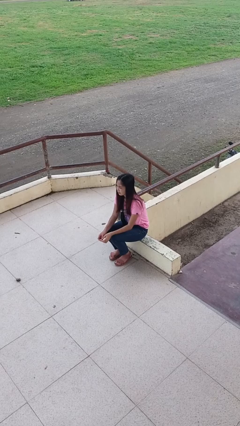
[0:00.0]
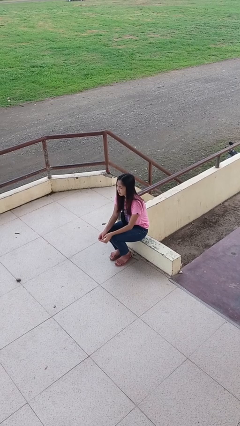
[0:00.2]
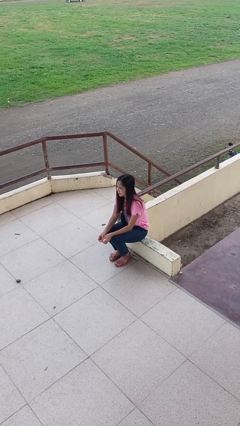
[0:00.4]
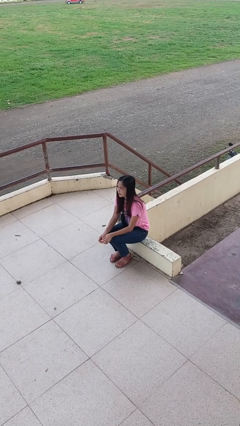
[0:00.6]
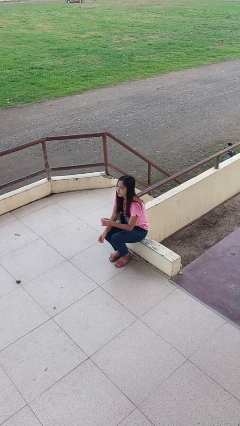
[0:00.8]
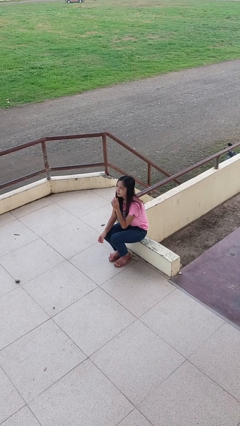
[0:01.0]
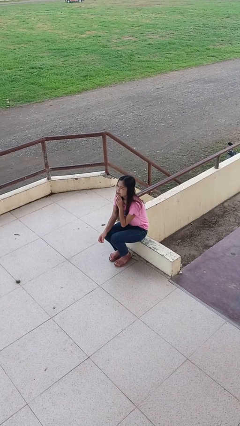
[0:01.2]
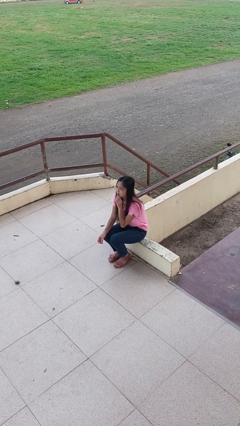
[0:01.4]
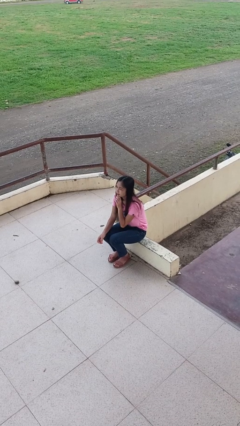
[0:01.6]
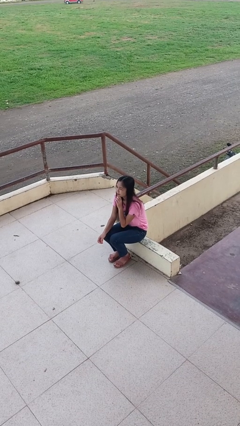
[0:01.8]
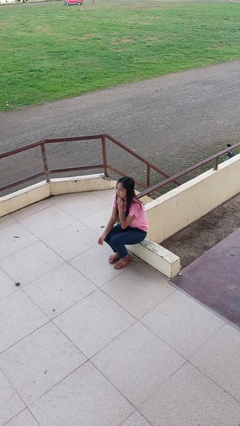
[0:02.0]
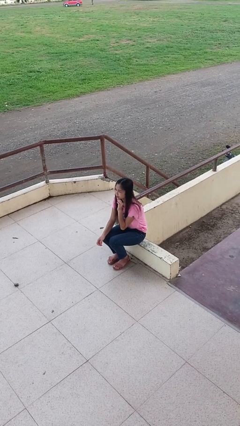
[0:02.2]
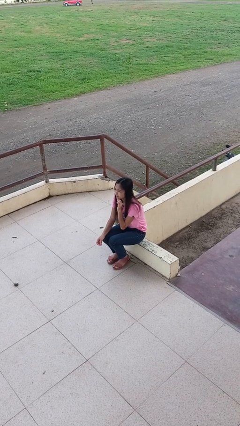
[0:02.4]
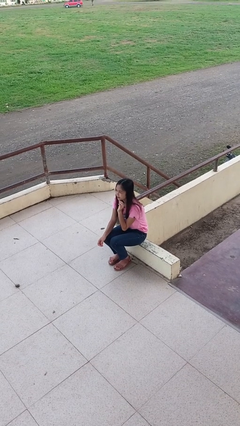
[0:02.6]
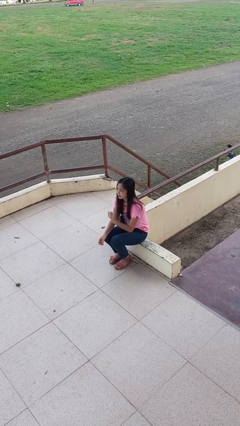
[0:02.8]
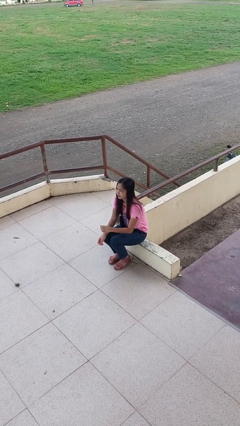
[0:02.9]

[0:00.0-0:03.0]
person strokes chin

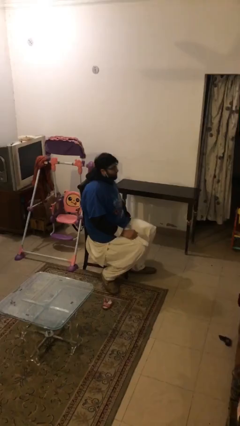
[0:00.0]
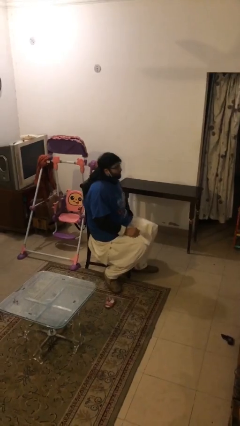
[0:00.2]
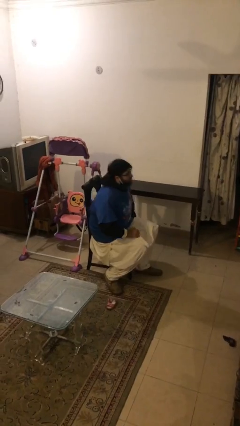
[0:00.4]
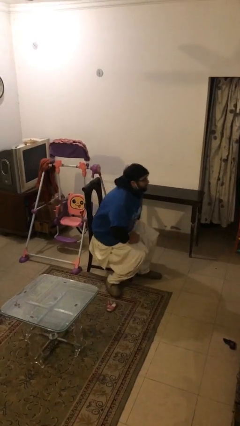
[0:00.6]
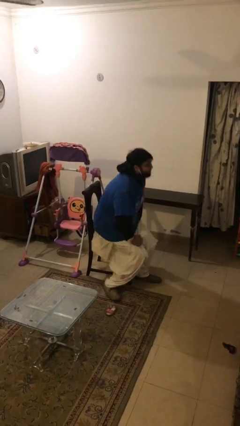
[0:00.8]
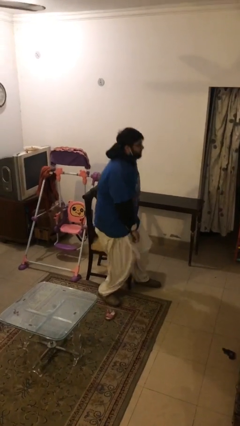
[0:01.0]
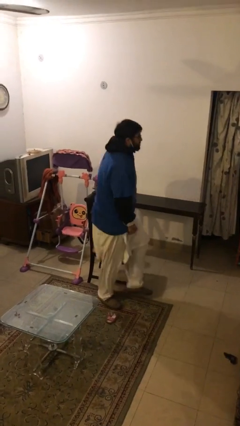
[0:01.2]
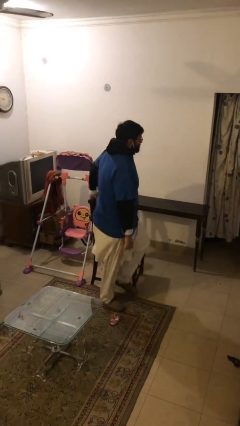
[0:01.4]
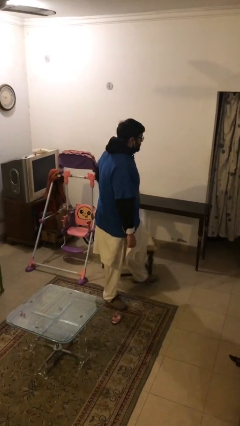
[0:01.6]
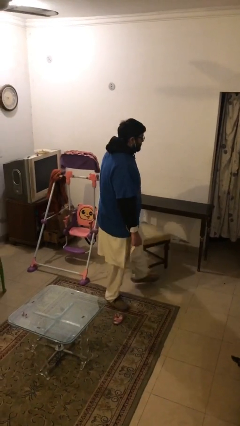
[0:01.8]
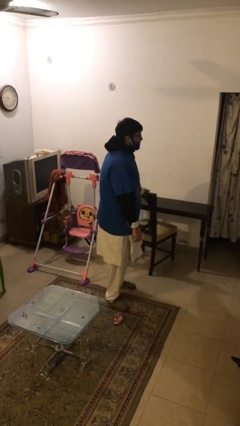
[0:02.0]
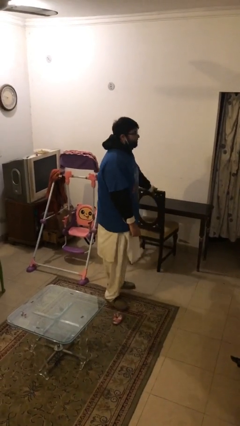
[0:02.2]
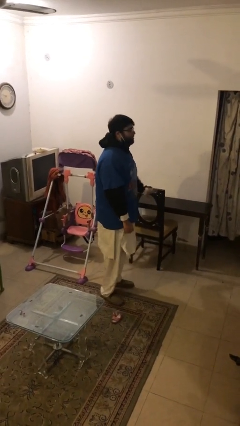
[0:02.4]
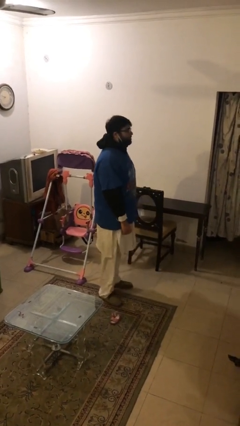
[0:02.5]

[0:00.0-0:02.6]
person stands up

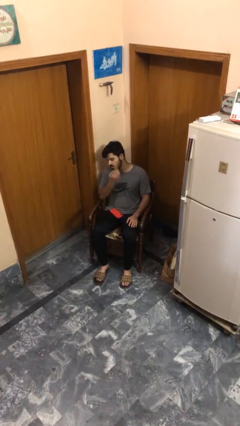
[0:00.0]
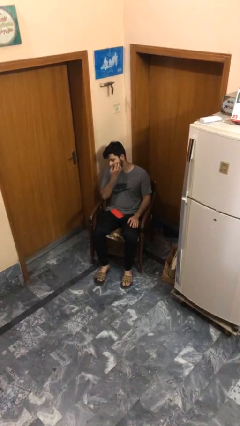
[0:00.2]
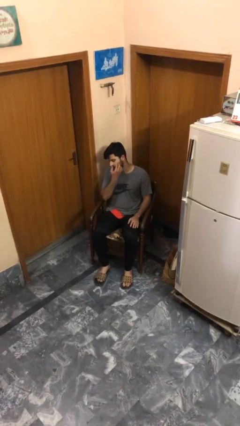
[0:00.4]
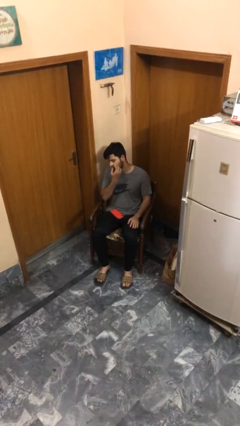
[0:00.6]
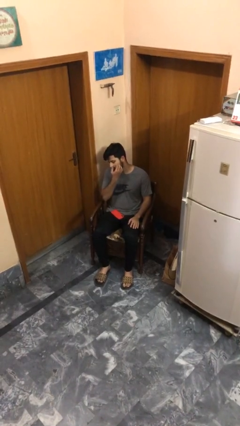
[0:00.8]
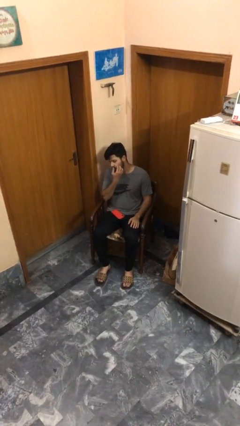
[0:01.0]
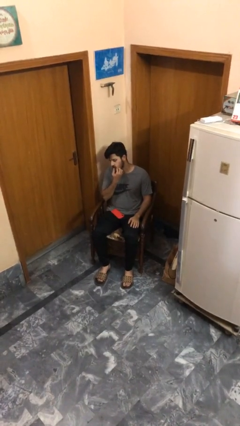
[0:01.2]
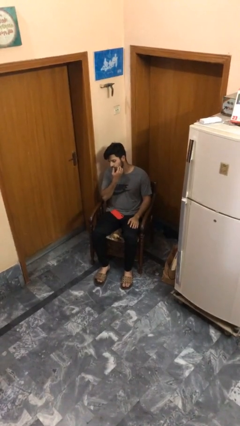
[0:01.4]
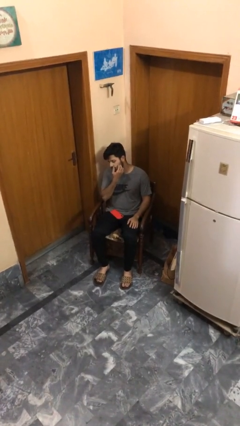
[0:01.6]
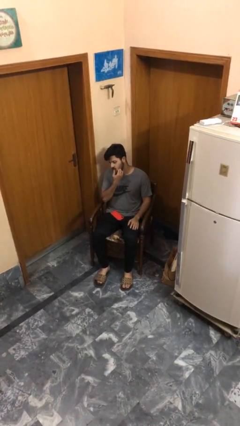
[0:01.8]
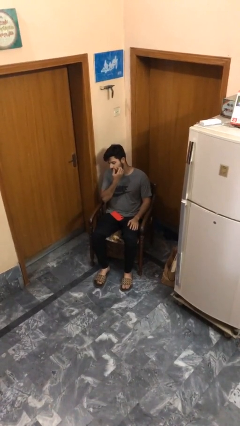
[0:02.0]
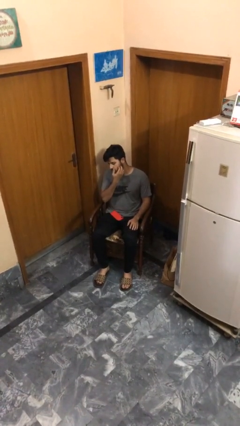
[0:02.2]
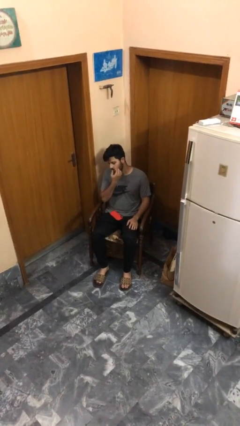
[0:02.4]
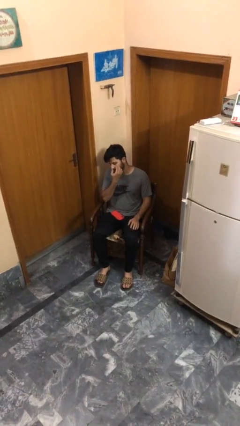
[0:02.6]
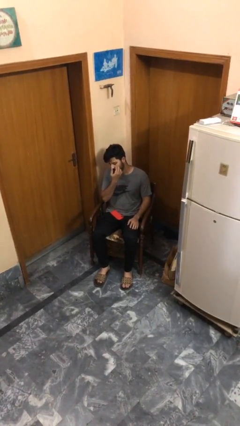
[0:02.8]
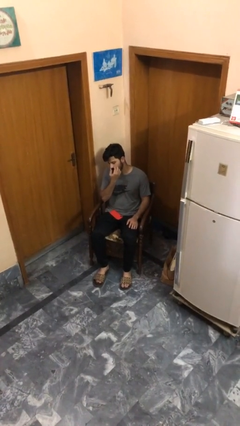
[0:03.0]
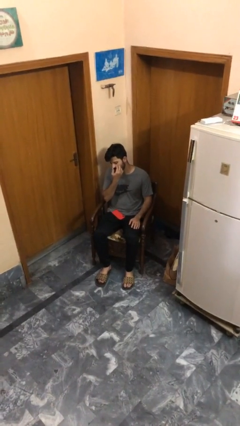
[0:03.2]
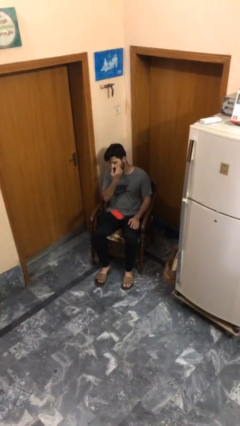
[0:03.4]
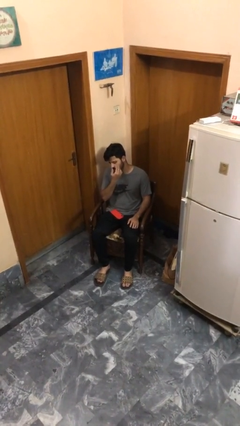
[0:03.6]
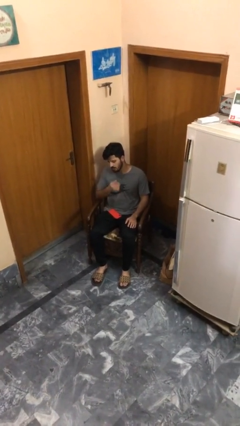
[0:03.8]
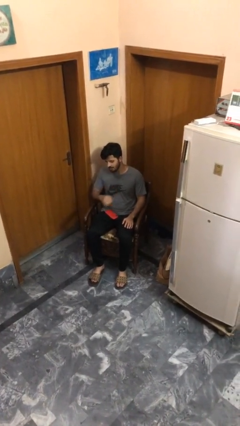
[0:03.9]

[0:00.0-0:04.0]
person scratches face

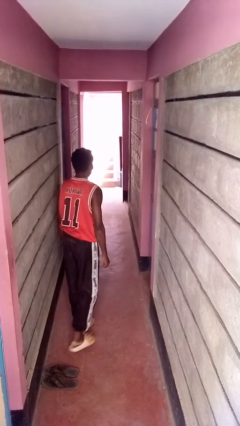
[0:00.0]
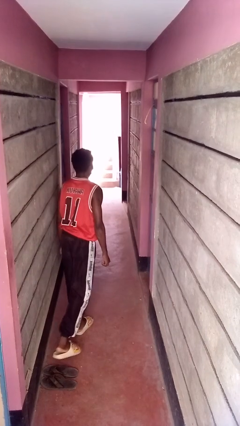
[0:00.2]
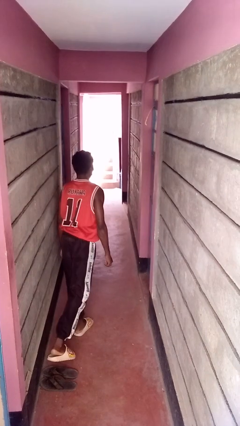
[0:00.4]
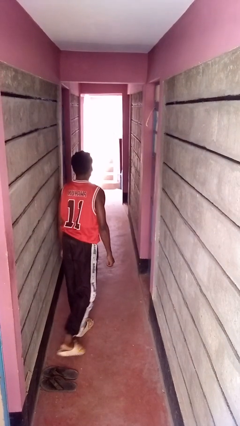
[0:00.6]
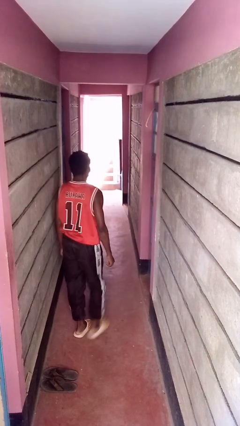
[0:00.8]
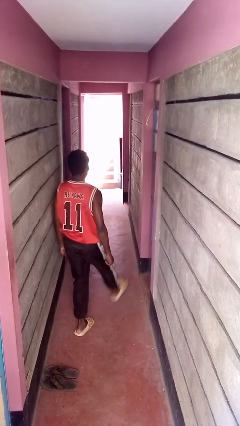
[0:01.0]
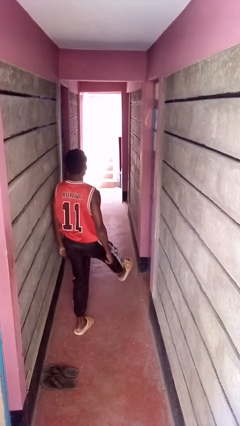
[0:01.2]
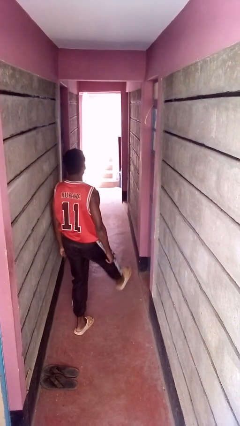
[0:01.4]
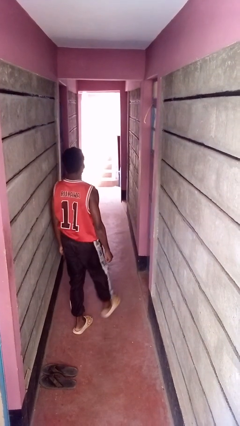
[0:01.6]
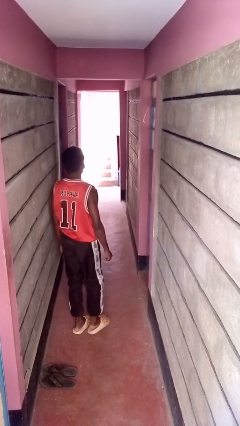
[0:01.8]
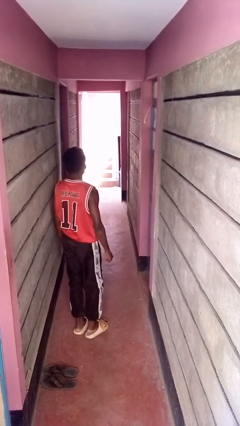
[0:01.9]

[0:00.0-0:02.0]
person wiggles hips

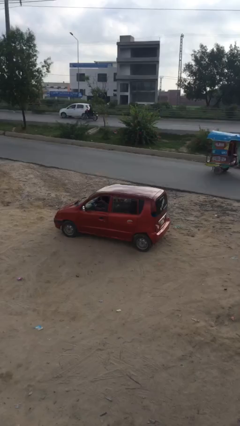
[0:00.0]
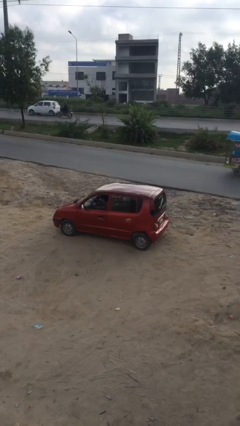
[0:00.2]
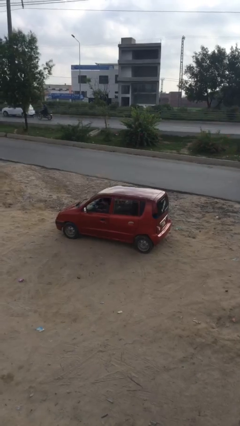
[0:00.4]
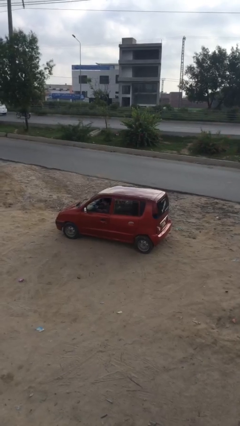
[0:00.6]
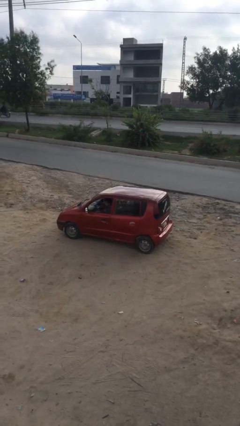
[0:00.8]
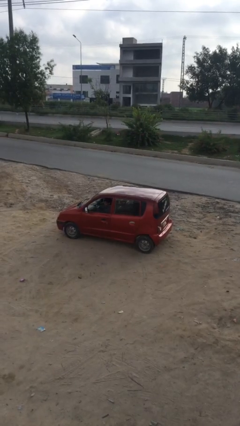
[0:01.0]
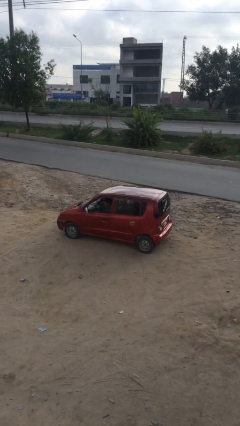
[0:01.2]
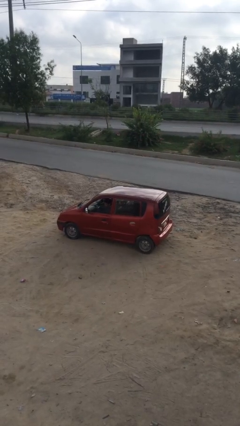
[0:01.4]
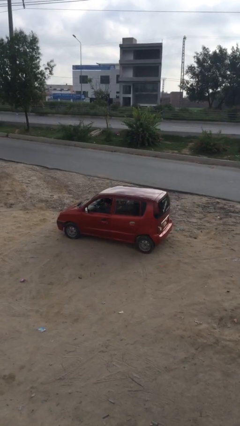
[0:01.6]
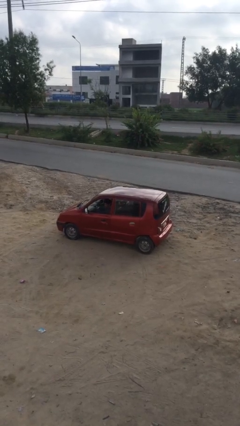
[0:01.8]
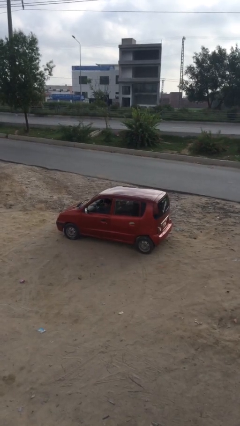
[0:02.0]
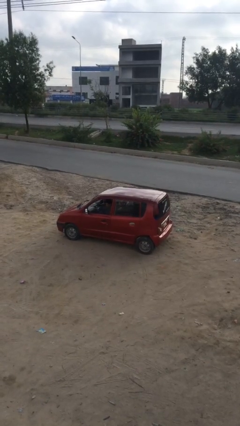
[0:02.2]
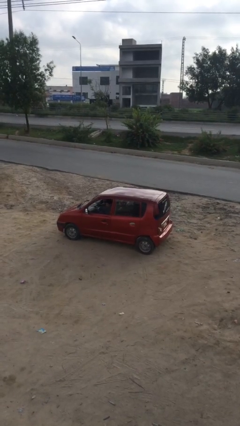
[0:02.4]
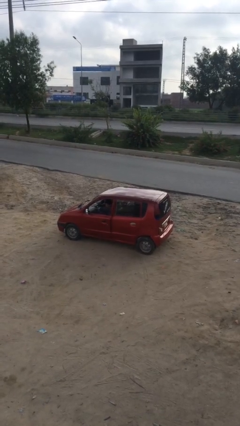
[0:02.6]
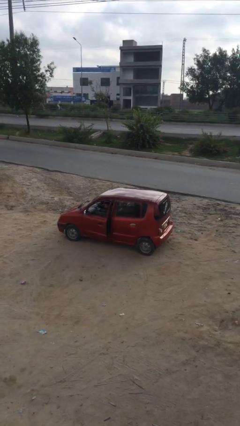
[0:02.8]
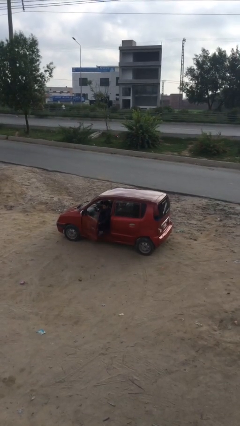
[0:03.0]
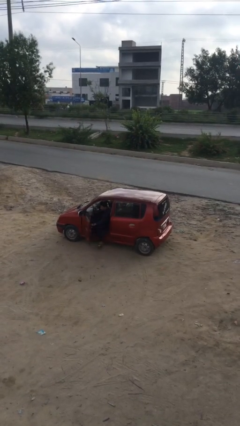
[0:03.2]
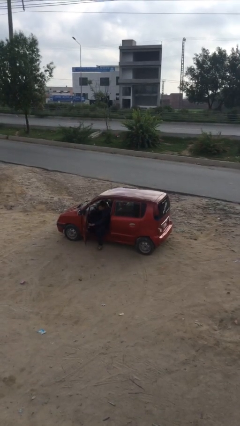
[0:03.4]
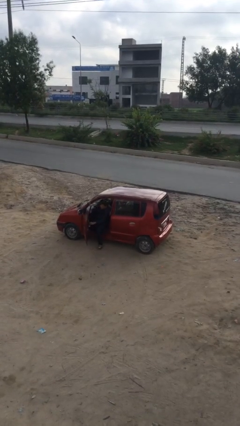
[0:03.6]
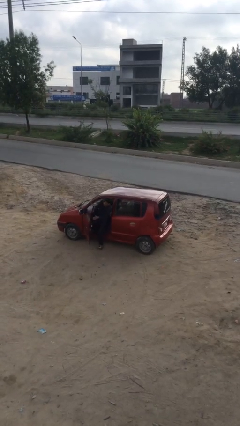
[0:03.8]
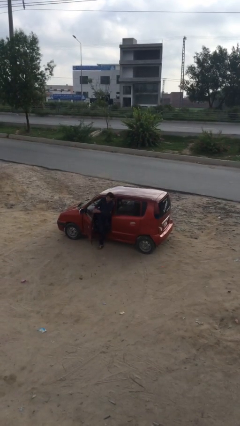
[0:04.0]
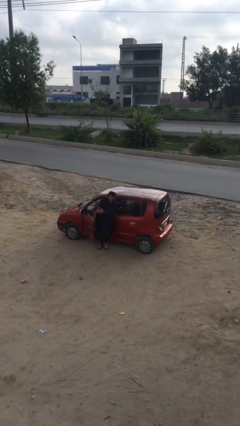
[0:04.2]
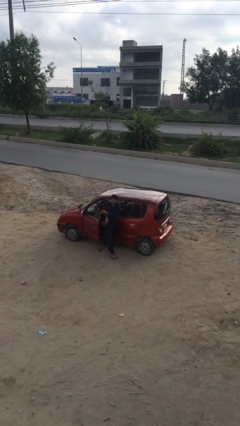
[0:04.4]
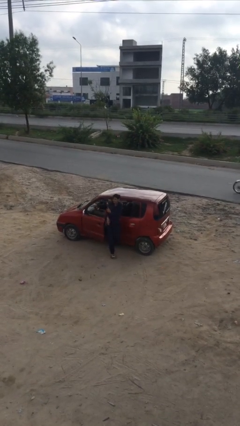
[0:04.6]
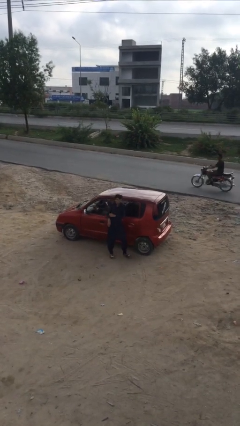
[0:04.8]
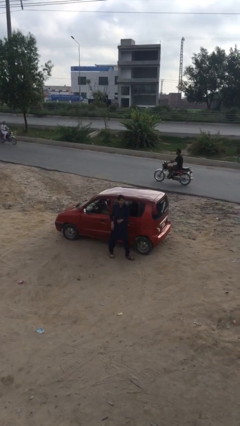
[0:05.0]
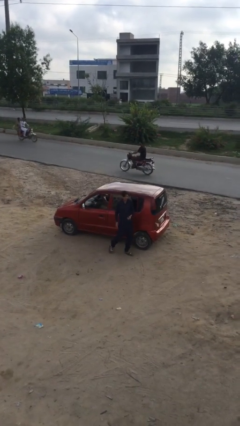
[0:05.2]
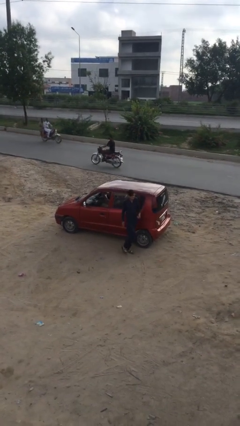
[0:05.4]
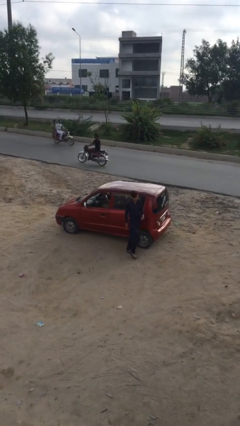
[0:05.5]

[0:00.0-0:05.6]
car drops off person

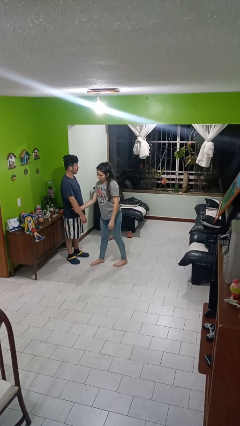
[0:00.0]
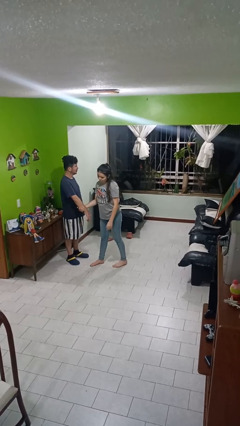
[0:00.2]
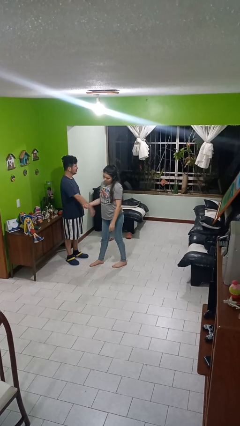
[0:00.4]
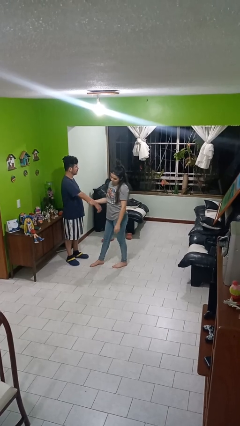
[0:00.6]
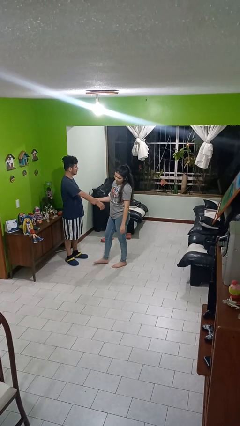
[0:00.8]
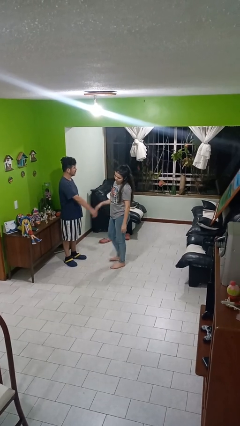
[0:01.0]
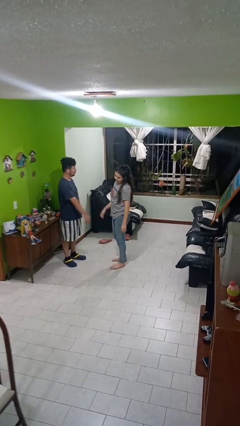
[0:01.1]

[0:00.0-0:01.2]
person grabs person by forearm
